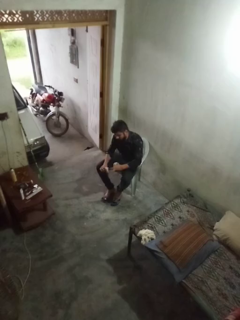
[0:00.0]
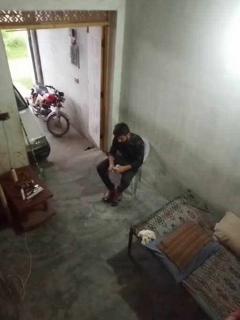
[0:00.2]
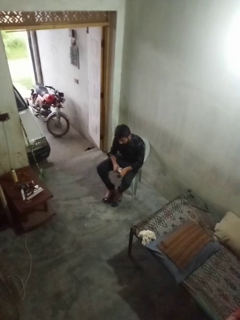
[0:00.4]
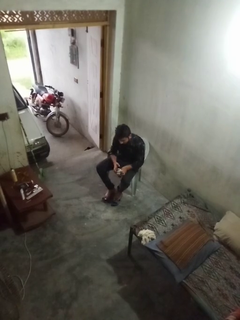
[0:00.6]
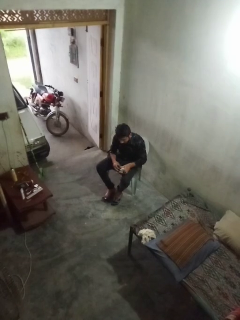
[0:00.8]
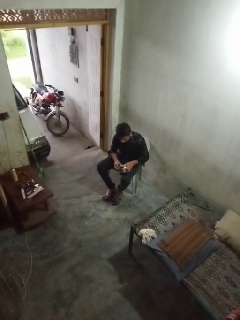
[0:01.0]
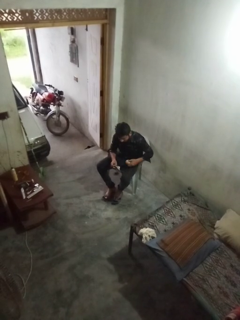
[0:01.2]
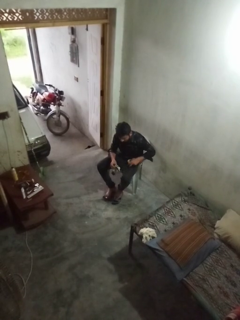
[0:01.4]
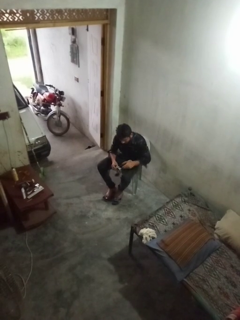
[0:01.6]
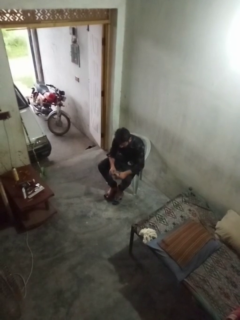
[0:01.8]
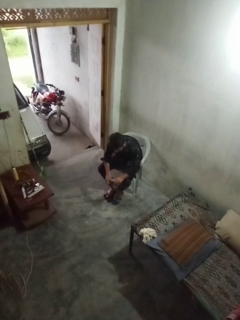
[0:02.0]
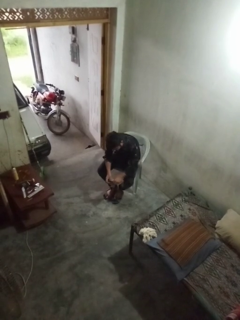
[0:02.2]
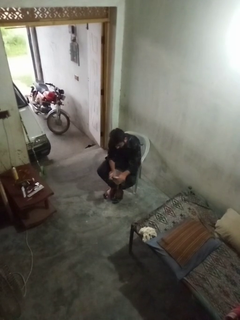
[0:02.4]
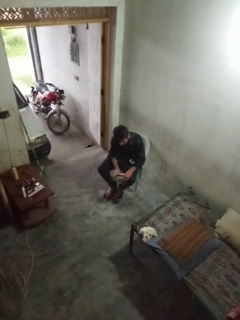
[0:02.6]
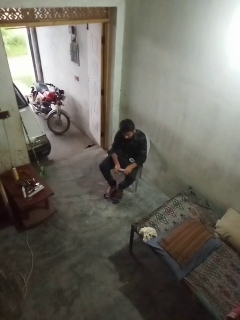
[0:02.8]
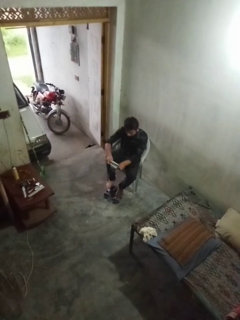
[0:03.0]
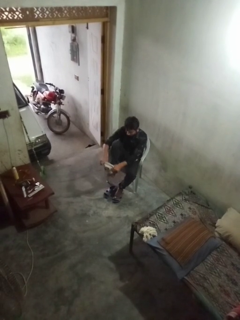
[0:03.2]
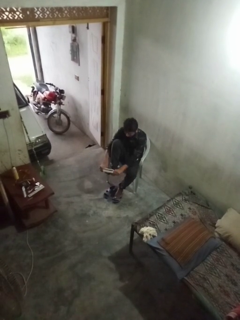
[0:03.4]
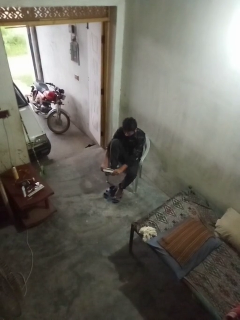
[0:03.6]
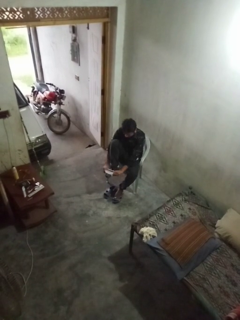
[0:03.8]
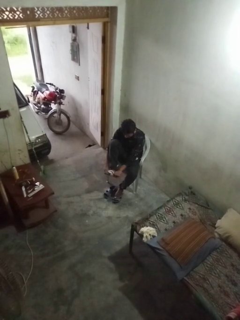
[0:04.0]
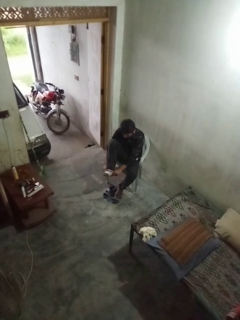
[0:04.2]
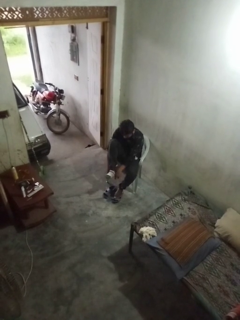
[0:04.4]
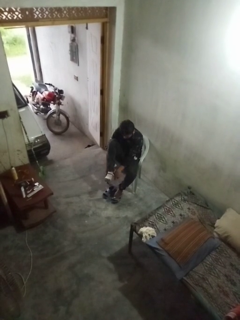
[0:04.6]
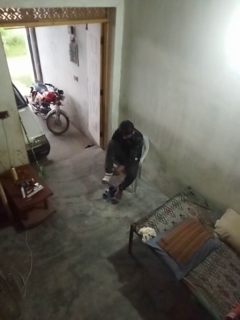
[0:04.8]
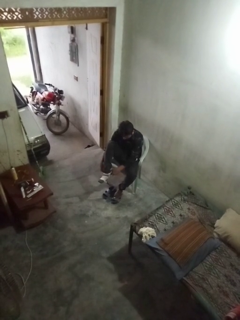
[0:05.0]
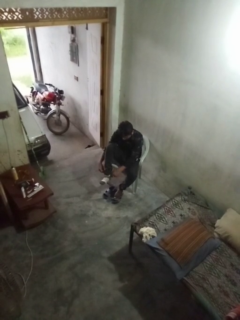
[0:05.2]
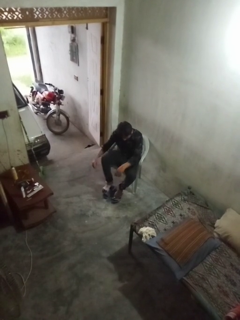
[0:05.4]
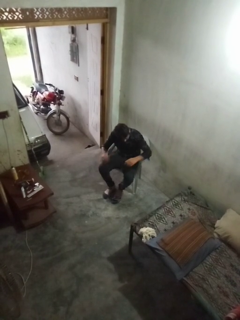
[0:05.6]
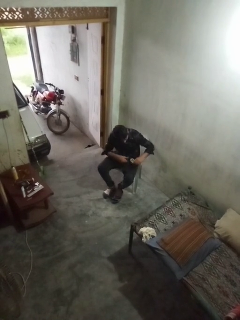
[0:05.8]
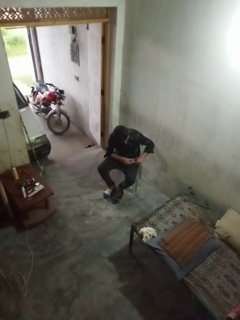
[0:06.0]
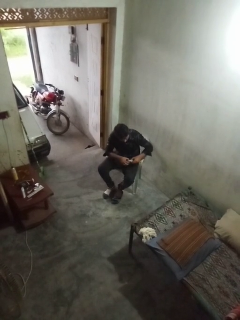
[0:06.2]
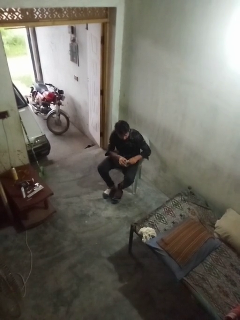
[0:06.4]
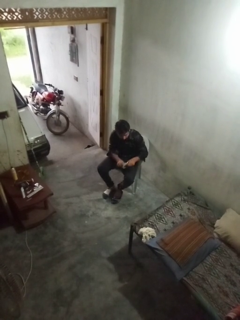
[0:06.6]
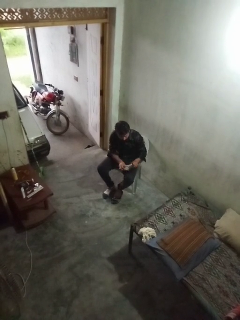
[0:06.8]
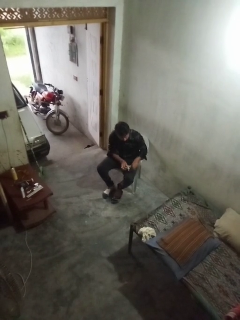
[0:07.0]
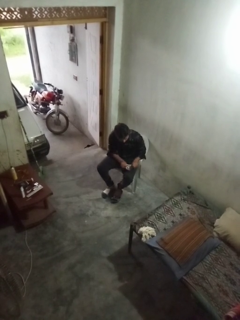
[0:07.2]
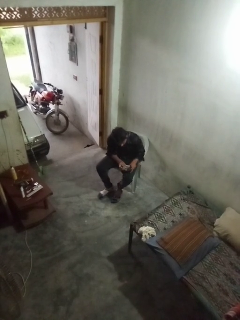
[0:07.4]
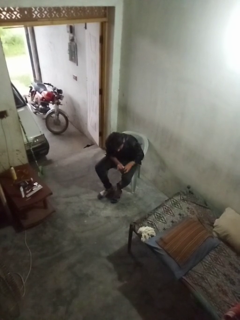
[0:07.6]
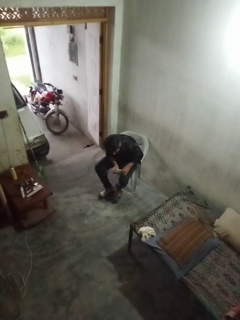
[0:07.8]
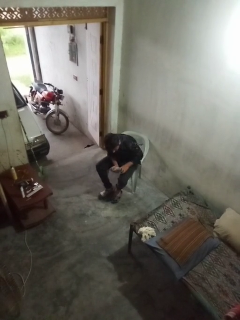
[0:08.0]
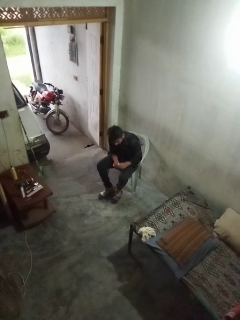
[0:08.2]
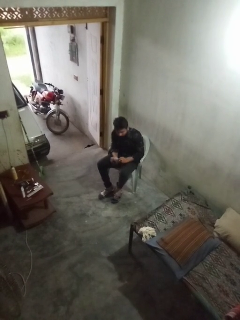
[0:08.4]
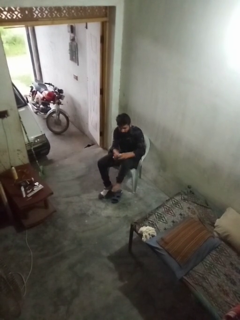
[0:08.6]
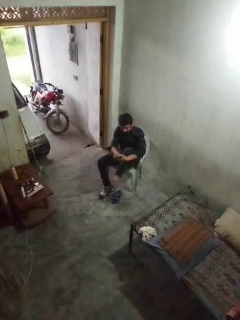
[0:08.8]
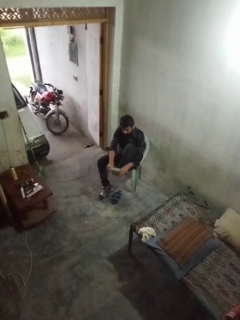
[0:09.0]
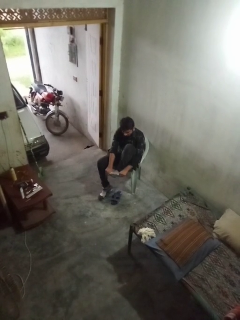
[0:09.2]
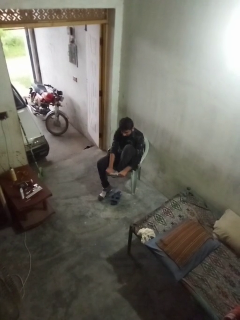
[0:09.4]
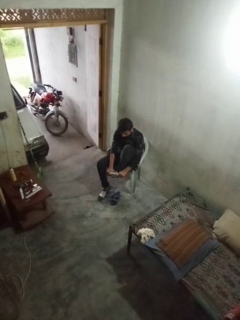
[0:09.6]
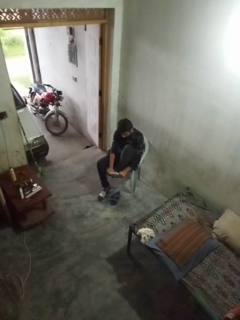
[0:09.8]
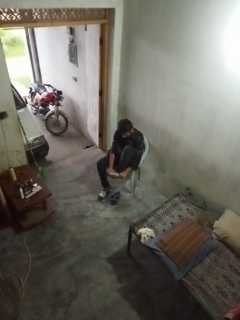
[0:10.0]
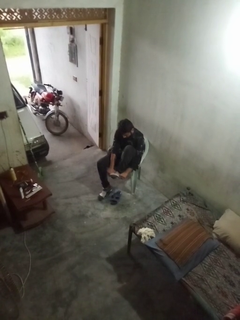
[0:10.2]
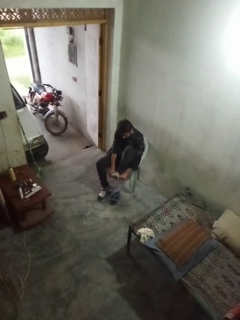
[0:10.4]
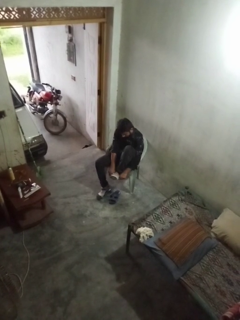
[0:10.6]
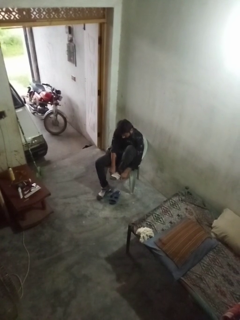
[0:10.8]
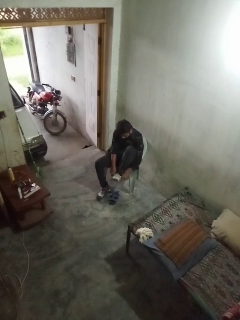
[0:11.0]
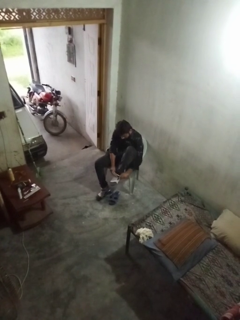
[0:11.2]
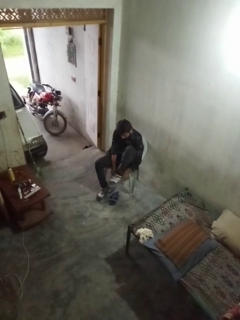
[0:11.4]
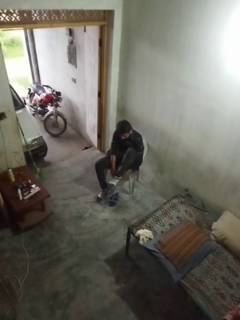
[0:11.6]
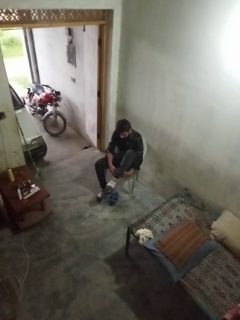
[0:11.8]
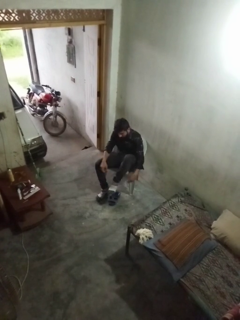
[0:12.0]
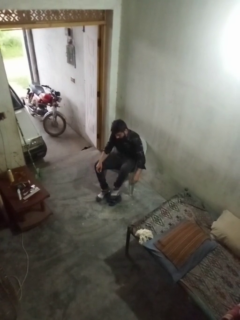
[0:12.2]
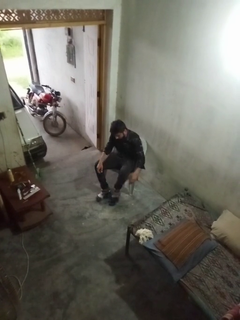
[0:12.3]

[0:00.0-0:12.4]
person puts on socks

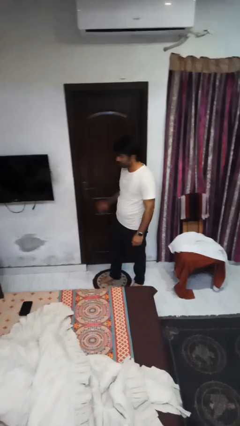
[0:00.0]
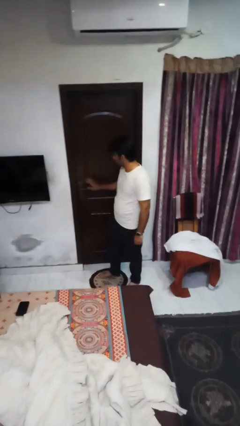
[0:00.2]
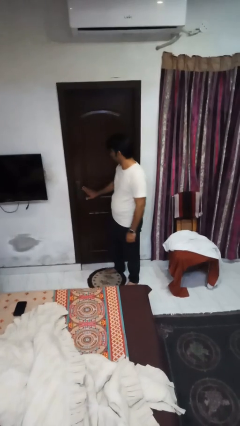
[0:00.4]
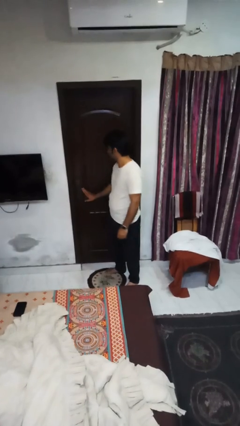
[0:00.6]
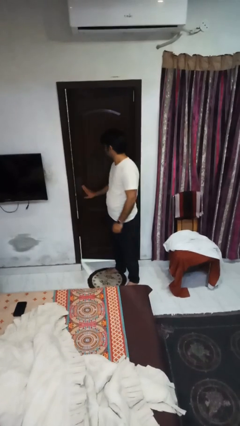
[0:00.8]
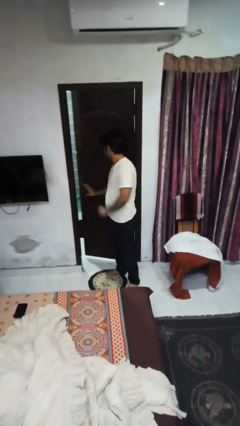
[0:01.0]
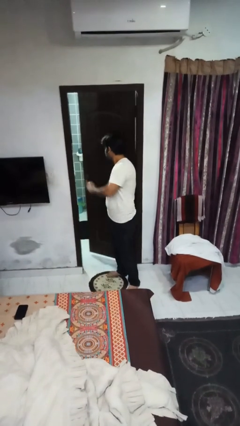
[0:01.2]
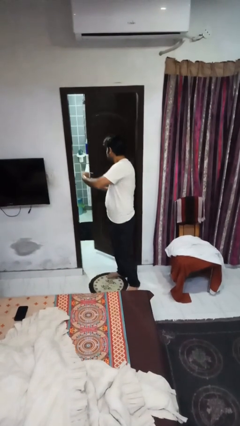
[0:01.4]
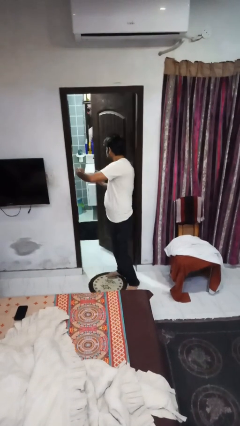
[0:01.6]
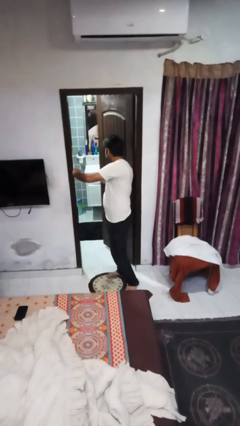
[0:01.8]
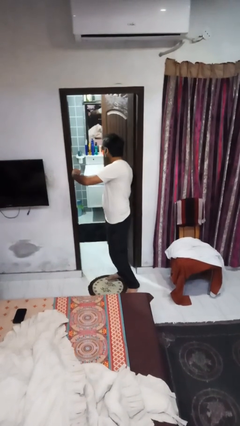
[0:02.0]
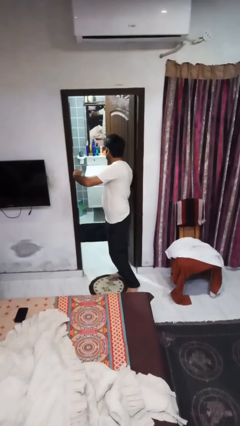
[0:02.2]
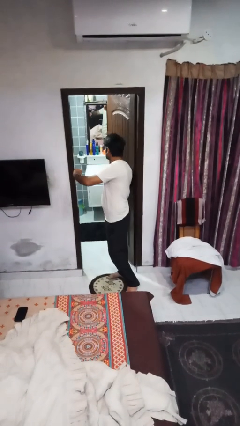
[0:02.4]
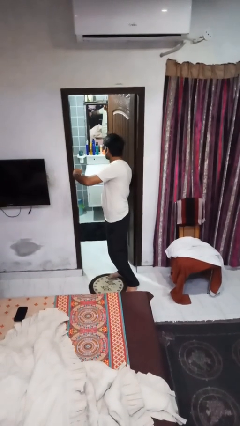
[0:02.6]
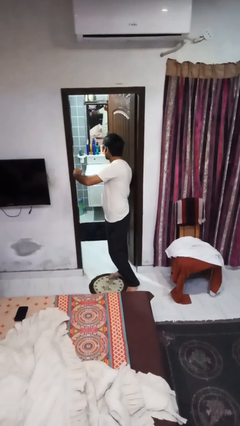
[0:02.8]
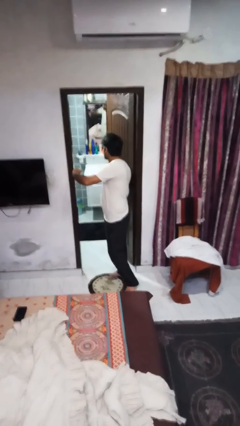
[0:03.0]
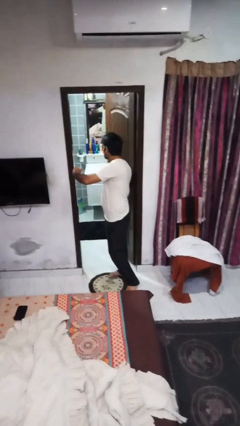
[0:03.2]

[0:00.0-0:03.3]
person opens facility door

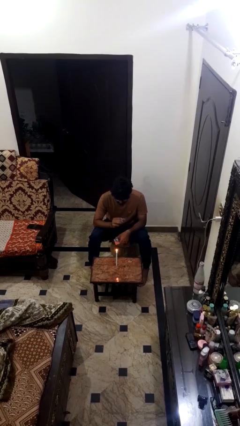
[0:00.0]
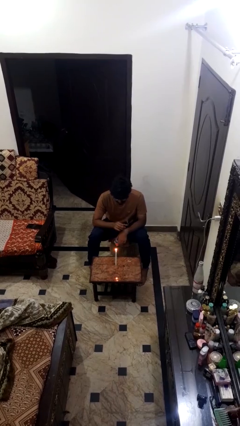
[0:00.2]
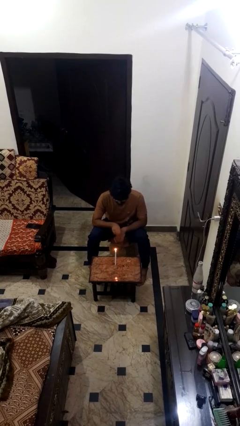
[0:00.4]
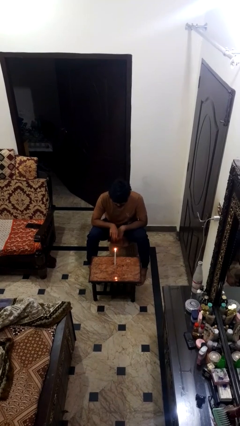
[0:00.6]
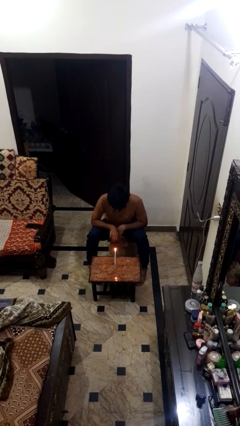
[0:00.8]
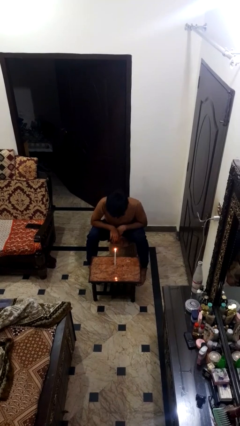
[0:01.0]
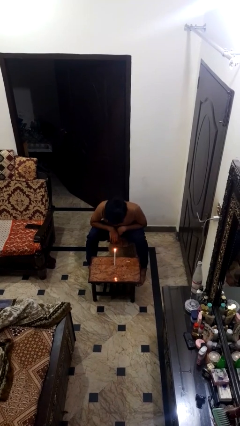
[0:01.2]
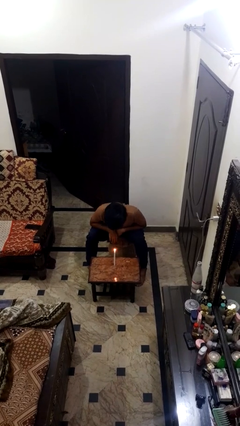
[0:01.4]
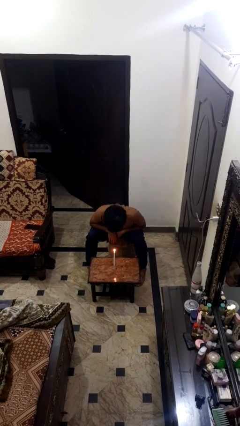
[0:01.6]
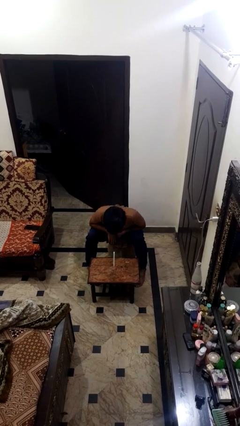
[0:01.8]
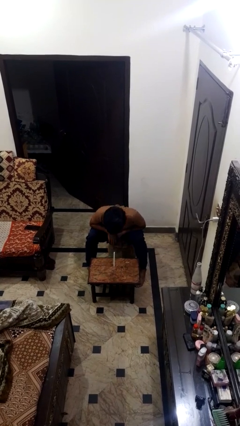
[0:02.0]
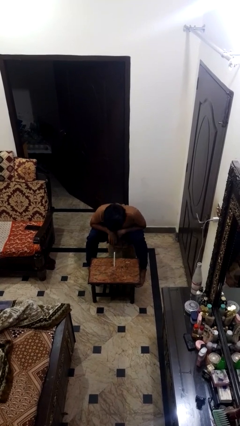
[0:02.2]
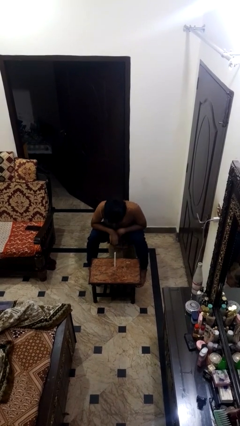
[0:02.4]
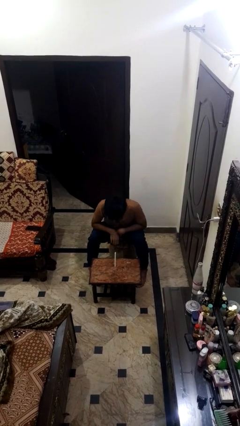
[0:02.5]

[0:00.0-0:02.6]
person extinguishes candle

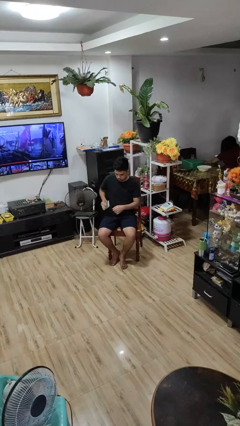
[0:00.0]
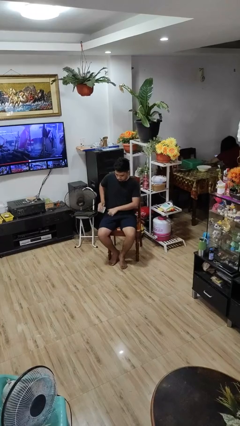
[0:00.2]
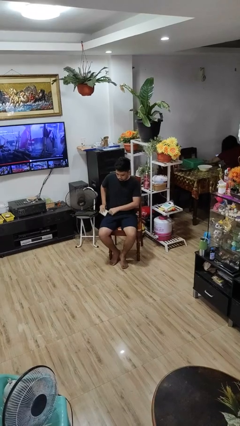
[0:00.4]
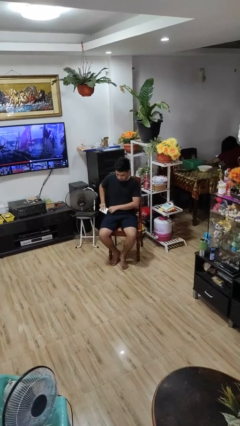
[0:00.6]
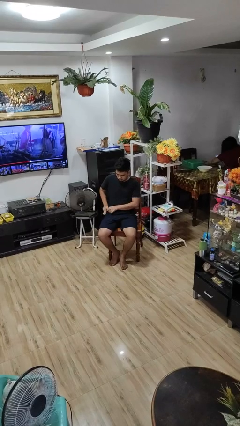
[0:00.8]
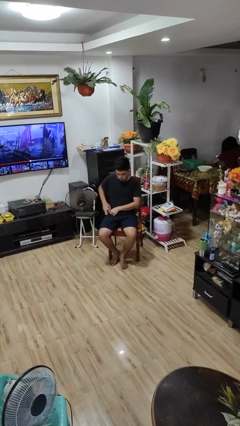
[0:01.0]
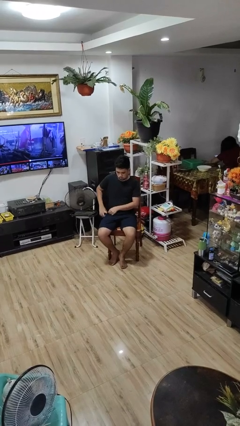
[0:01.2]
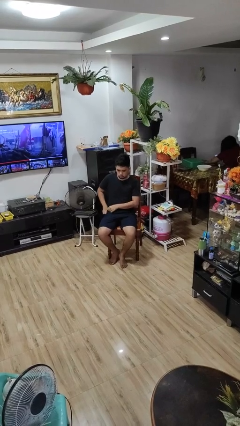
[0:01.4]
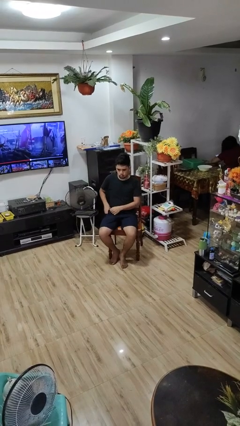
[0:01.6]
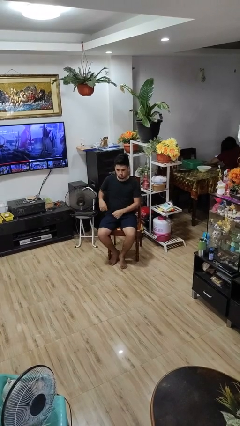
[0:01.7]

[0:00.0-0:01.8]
person puts phone into pocket

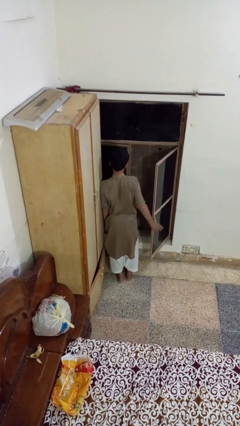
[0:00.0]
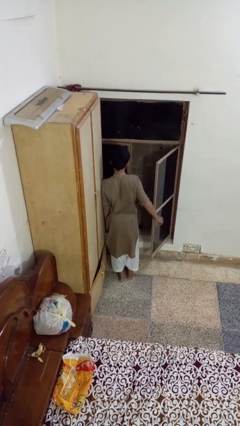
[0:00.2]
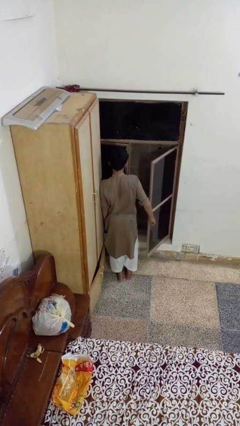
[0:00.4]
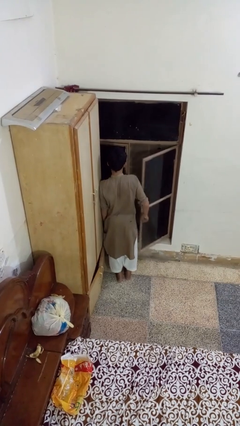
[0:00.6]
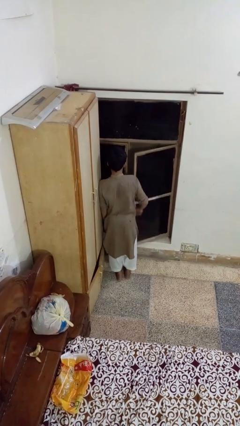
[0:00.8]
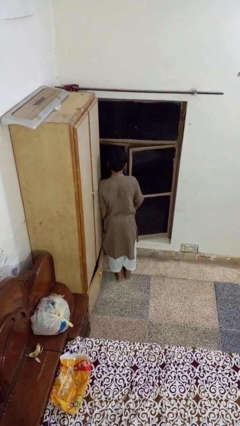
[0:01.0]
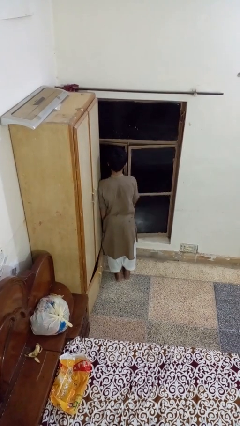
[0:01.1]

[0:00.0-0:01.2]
person closes home window
